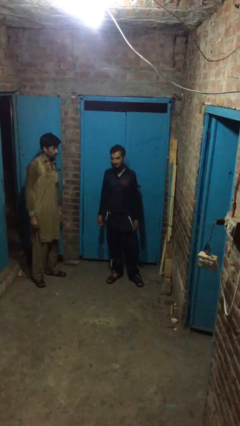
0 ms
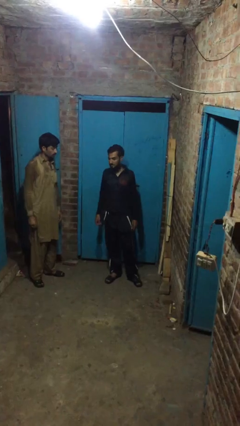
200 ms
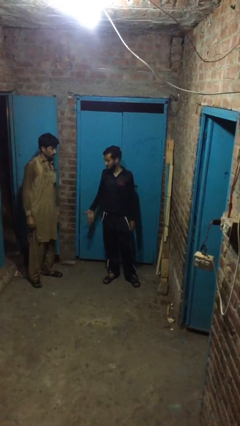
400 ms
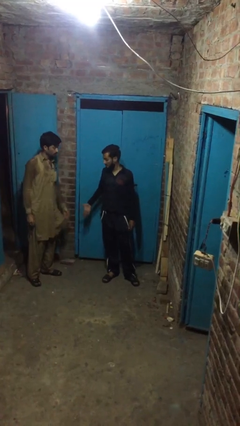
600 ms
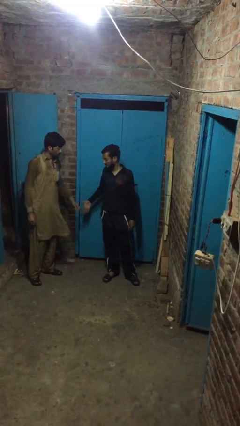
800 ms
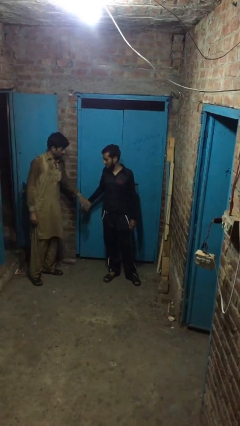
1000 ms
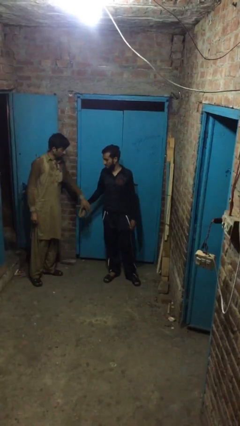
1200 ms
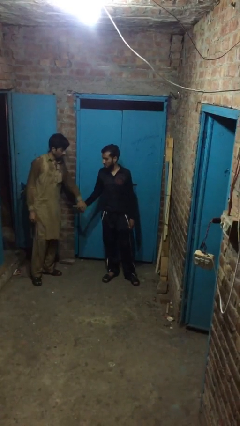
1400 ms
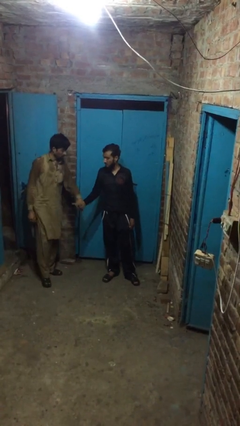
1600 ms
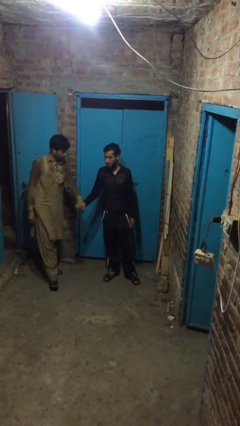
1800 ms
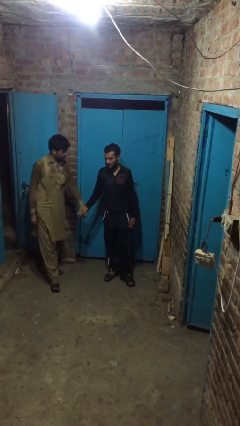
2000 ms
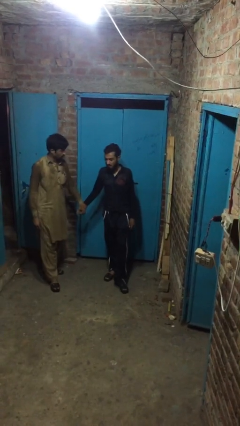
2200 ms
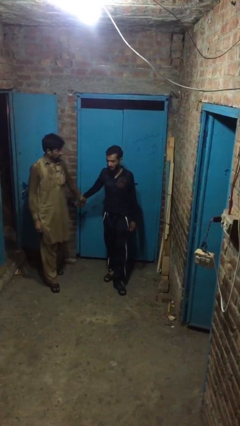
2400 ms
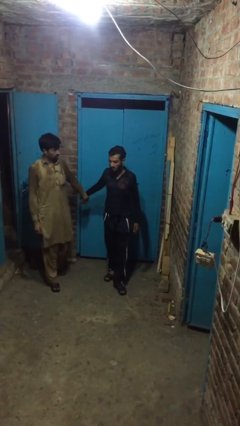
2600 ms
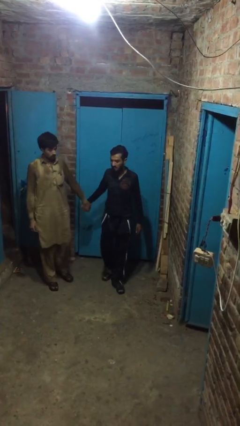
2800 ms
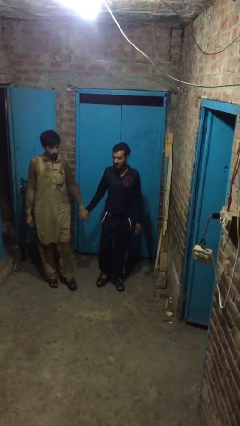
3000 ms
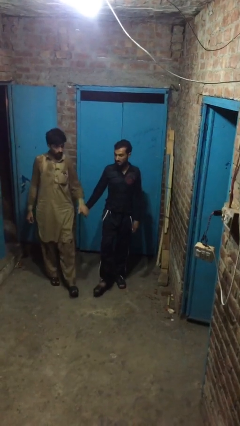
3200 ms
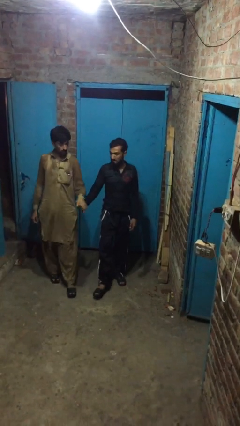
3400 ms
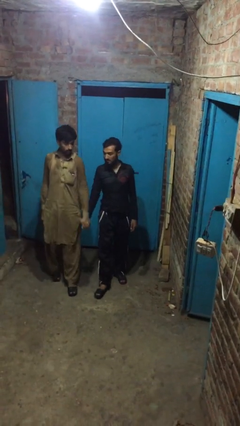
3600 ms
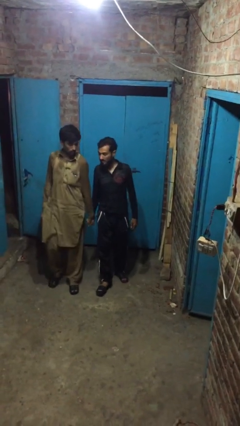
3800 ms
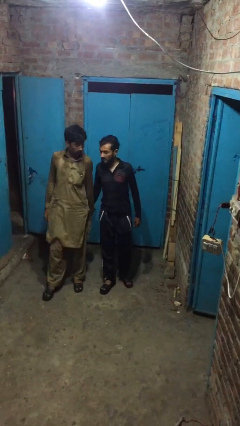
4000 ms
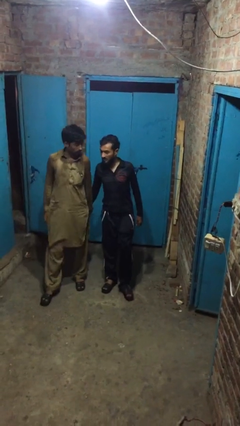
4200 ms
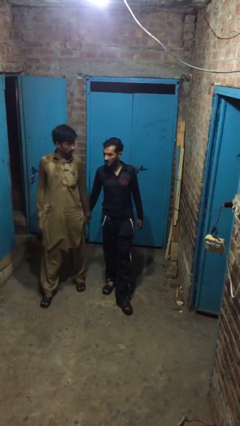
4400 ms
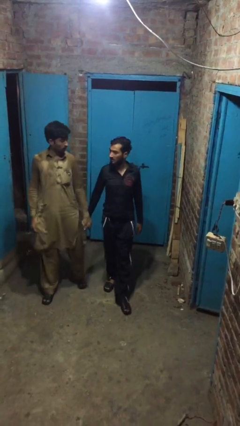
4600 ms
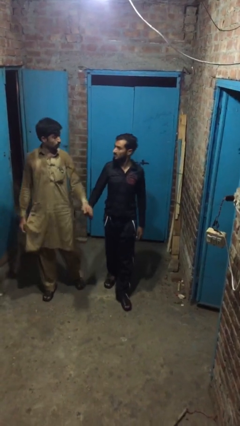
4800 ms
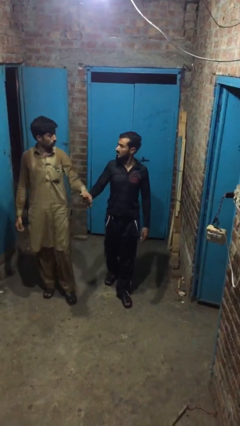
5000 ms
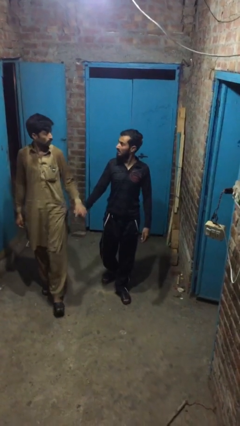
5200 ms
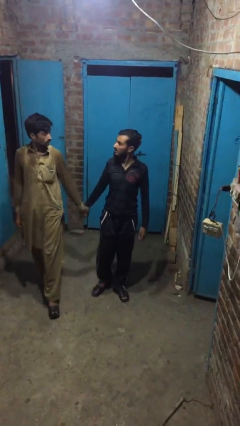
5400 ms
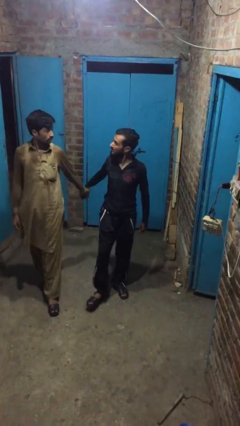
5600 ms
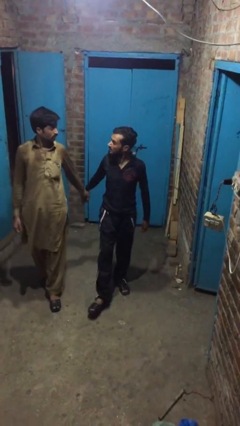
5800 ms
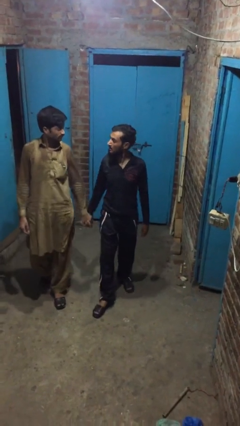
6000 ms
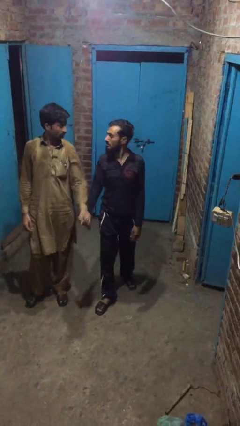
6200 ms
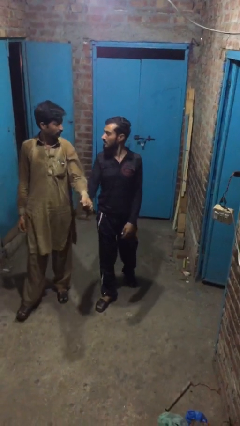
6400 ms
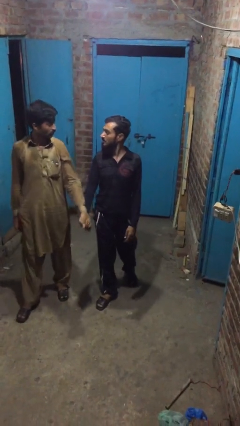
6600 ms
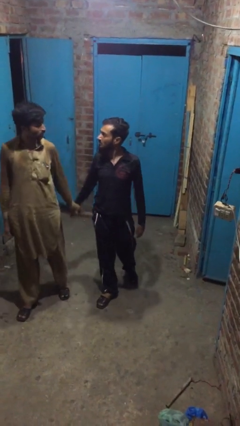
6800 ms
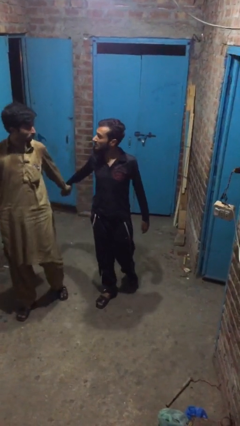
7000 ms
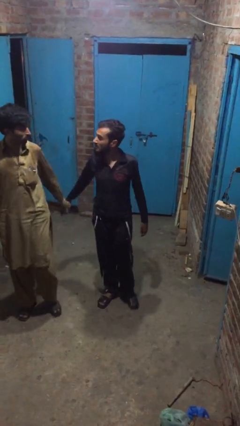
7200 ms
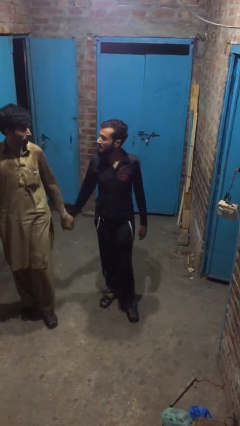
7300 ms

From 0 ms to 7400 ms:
person holds hand

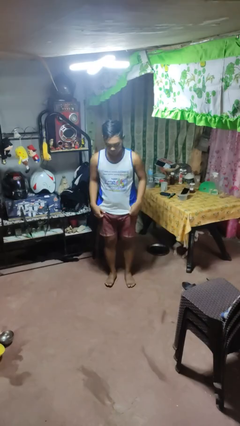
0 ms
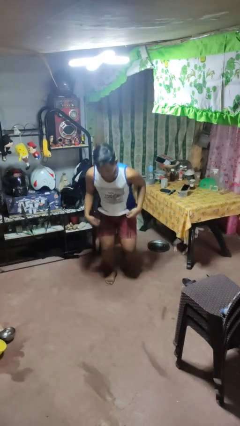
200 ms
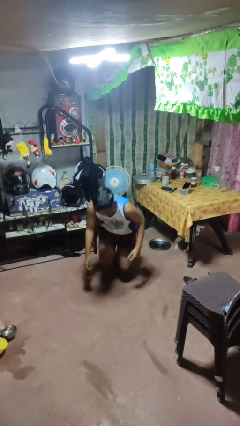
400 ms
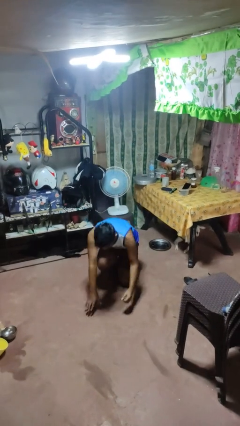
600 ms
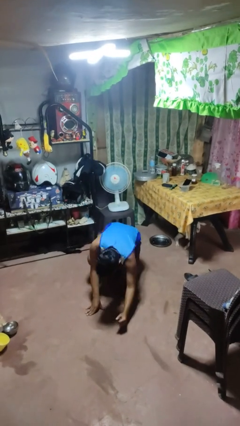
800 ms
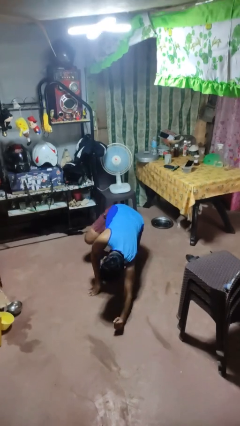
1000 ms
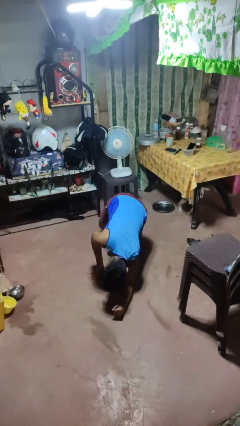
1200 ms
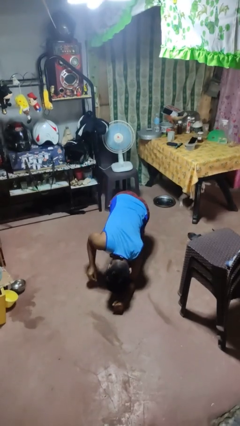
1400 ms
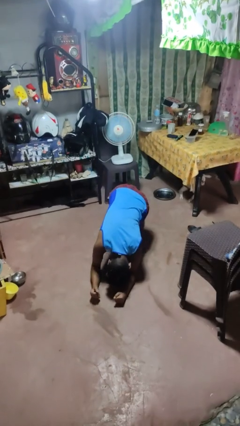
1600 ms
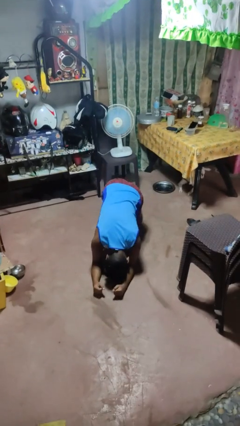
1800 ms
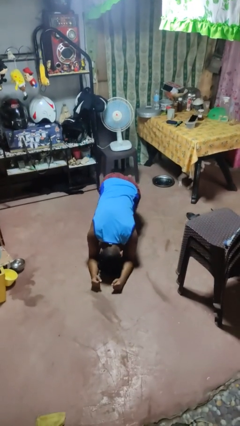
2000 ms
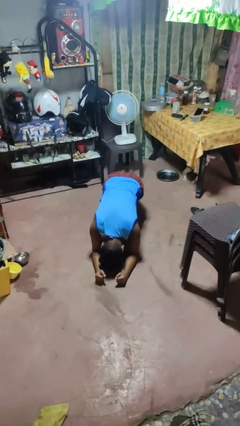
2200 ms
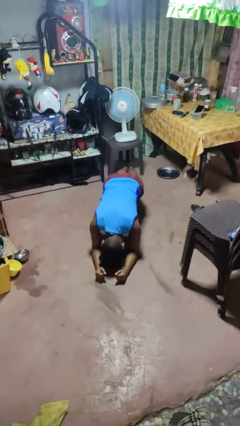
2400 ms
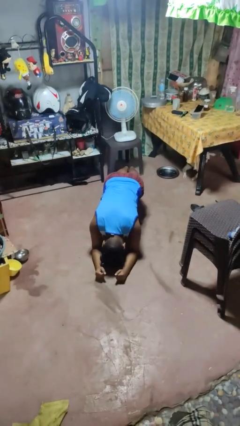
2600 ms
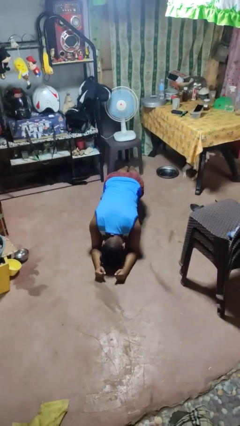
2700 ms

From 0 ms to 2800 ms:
person exercises with plank

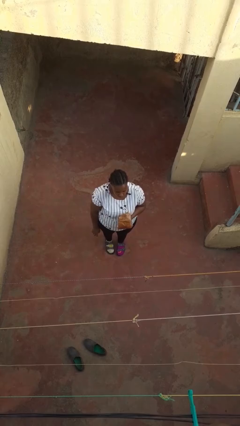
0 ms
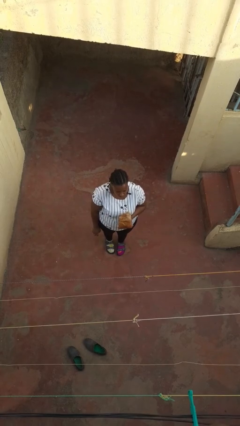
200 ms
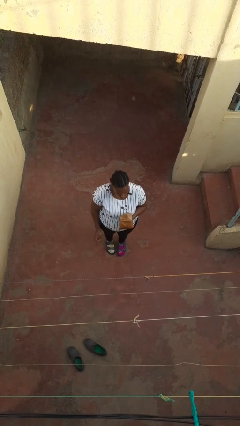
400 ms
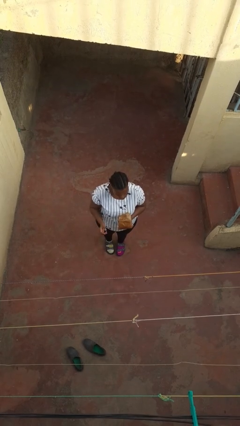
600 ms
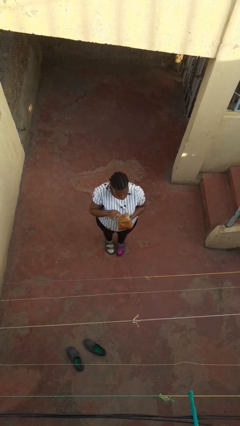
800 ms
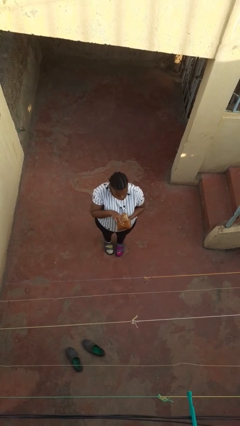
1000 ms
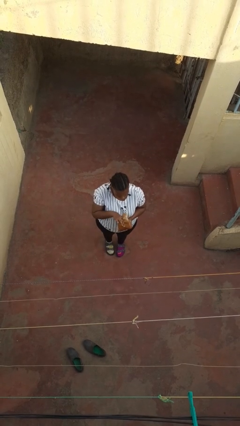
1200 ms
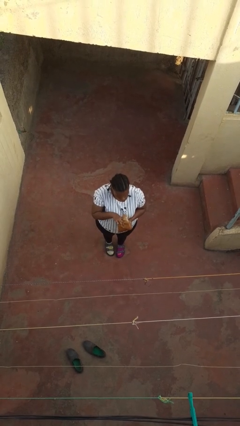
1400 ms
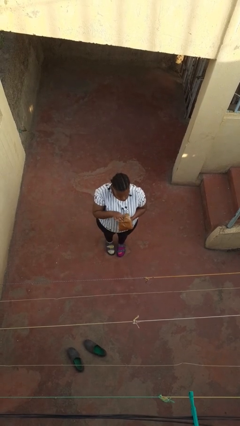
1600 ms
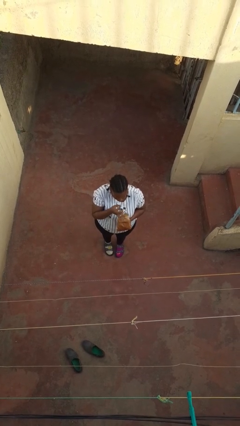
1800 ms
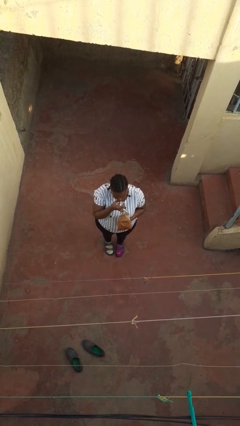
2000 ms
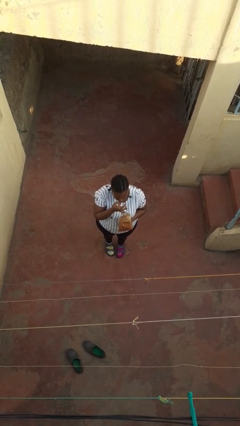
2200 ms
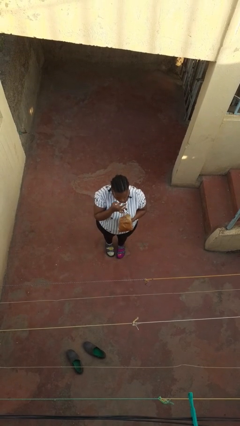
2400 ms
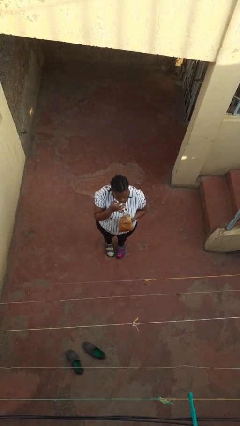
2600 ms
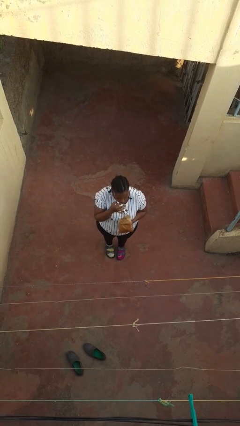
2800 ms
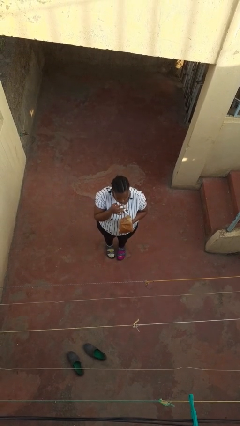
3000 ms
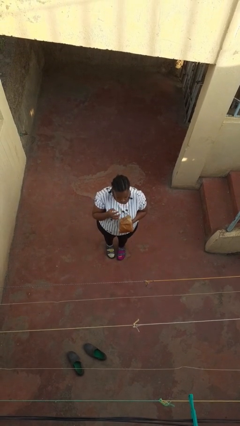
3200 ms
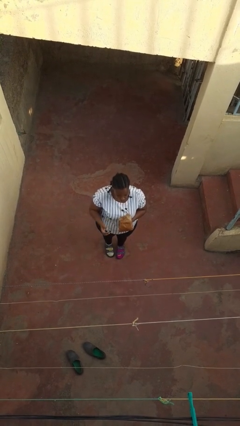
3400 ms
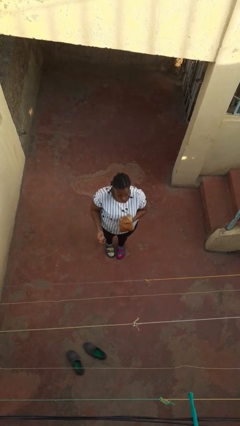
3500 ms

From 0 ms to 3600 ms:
person eats snack from bag

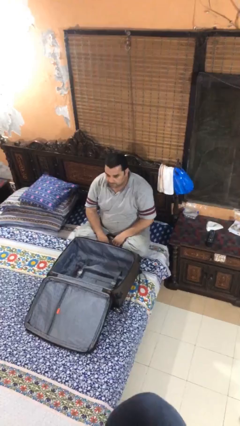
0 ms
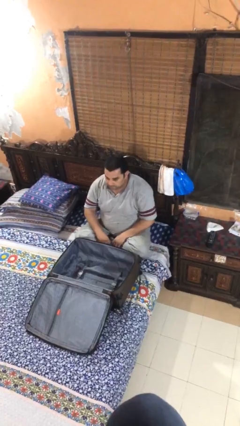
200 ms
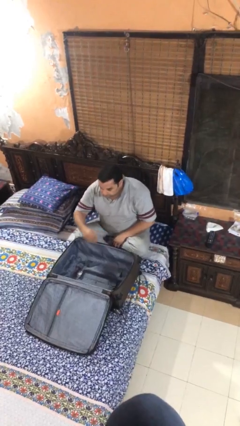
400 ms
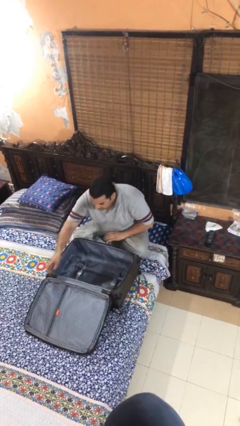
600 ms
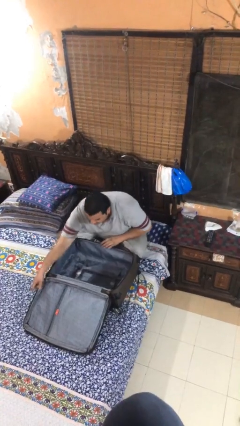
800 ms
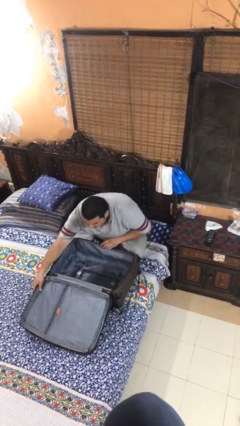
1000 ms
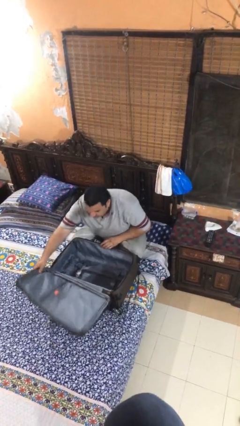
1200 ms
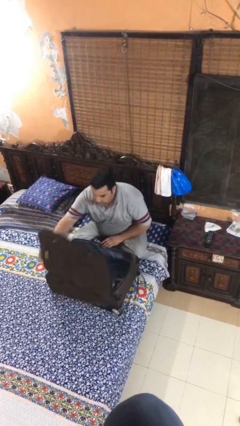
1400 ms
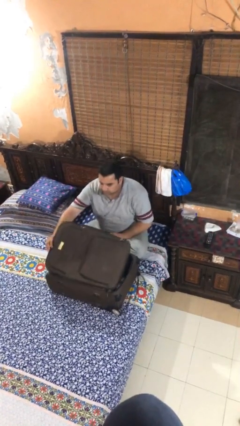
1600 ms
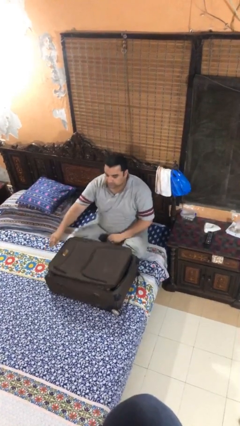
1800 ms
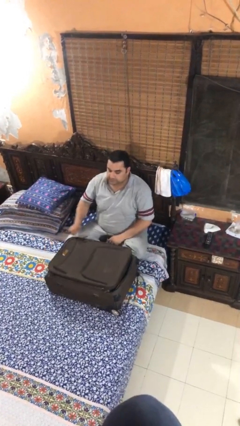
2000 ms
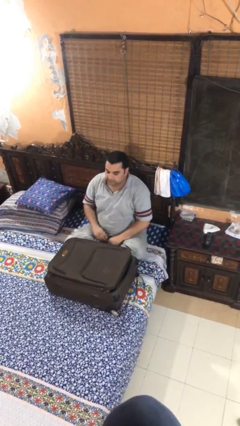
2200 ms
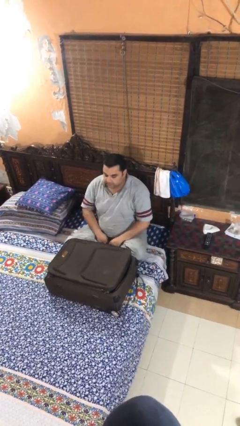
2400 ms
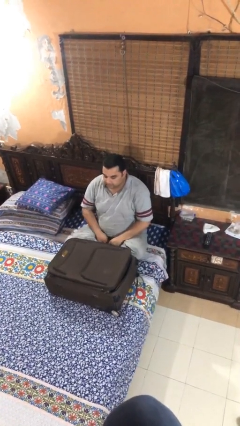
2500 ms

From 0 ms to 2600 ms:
person closes suitcase

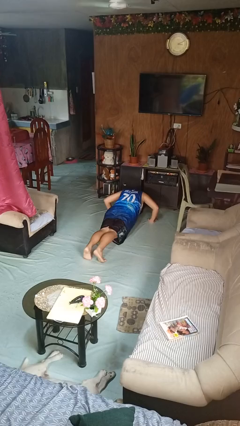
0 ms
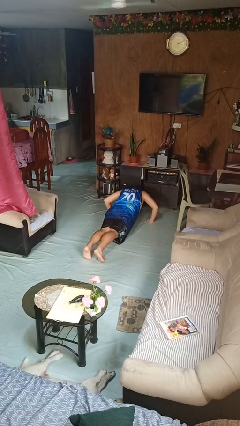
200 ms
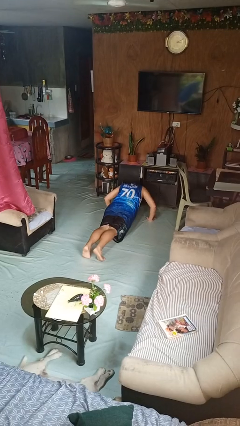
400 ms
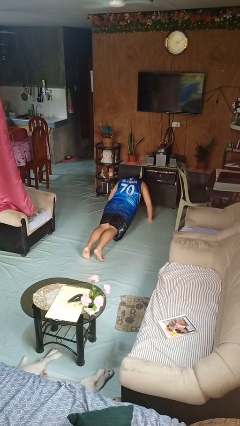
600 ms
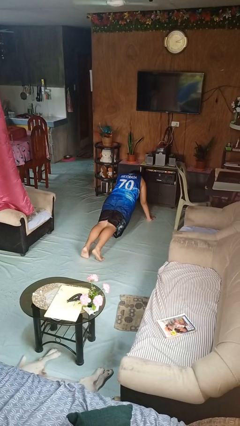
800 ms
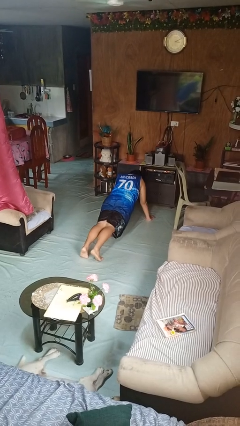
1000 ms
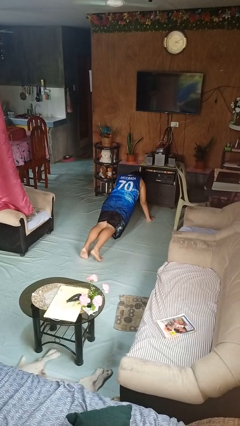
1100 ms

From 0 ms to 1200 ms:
person exercises with pushup

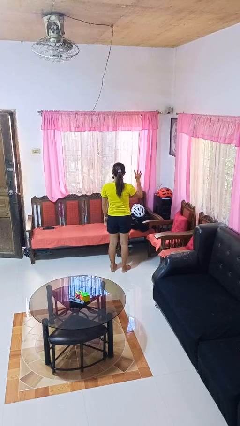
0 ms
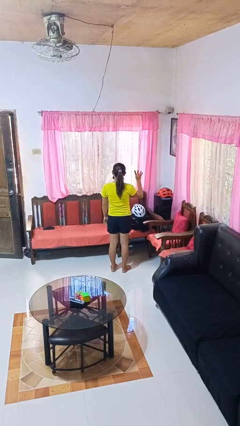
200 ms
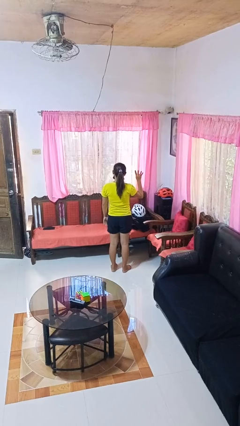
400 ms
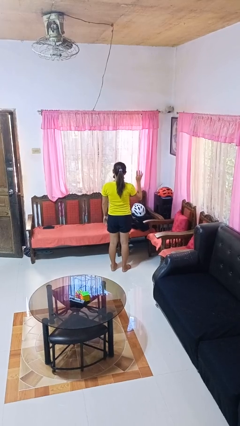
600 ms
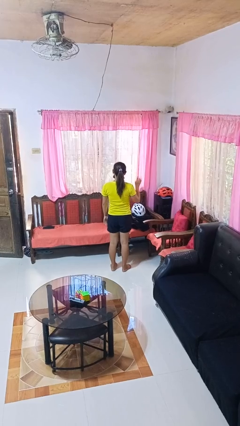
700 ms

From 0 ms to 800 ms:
person gestures number four
